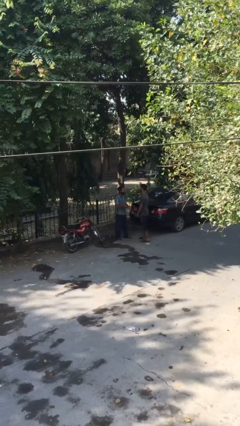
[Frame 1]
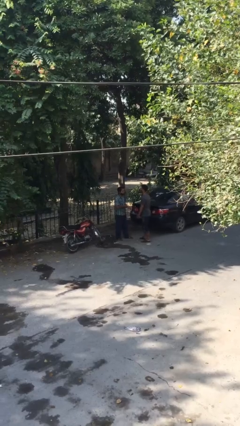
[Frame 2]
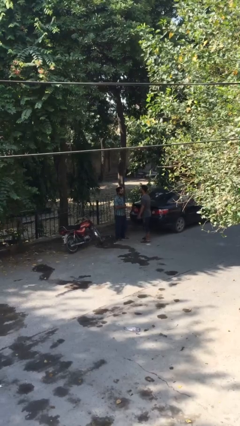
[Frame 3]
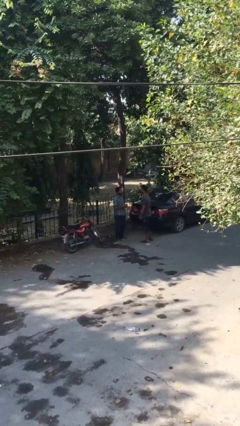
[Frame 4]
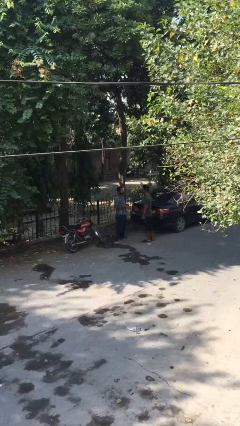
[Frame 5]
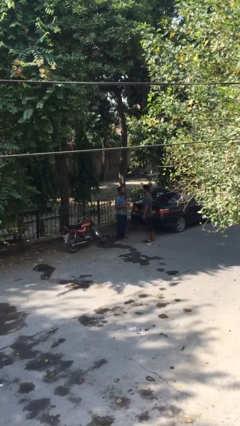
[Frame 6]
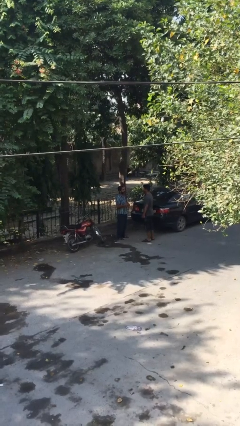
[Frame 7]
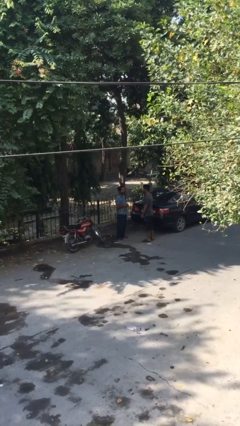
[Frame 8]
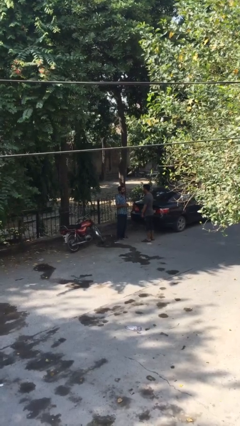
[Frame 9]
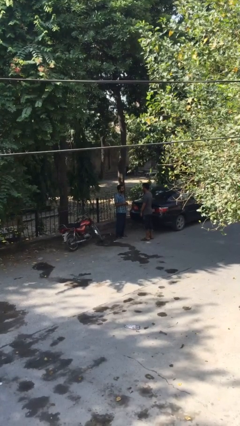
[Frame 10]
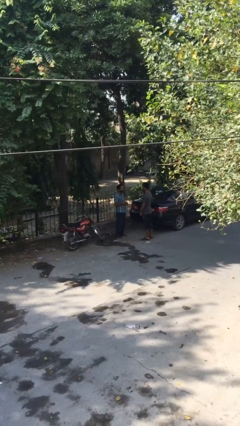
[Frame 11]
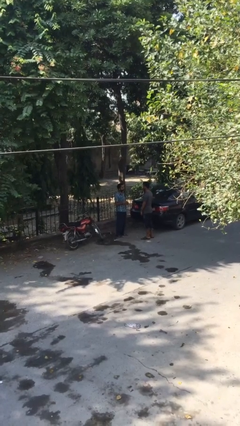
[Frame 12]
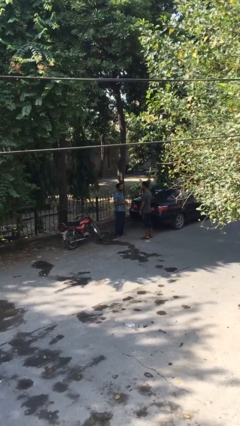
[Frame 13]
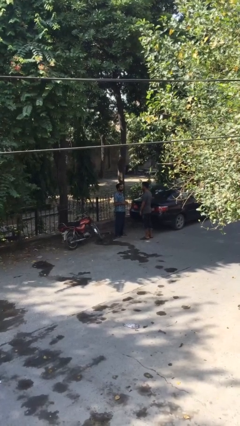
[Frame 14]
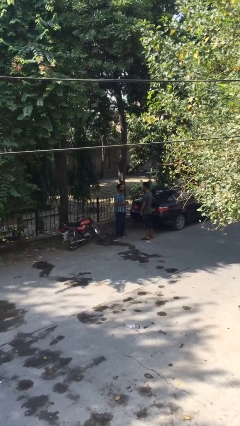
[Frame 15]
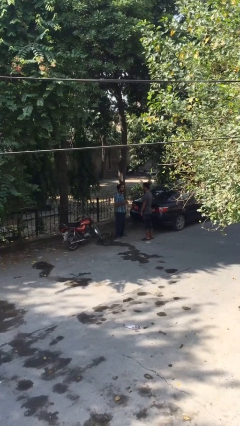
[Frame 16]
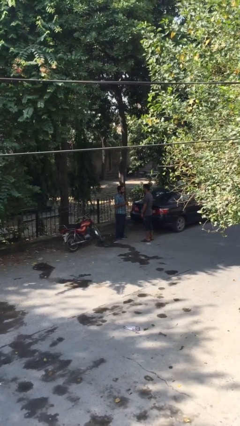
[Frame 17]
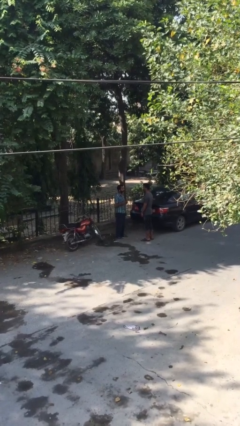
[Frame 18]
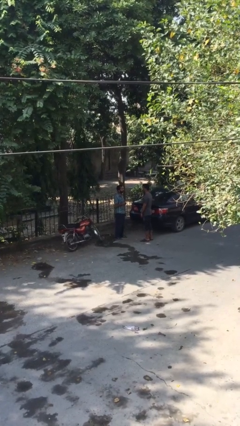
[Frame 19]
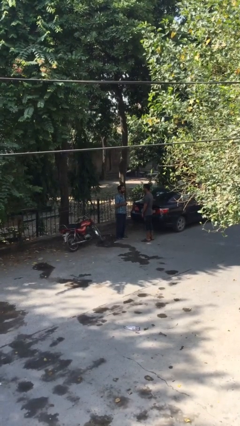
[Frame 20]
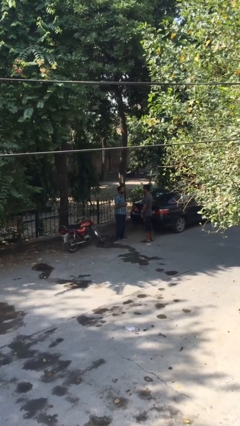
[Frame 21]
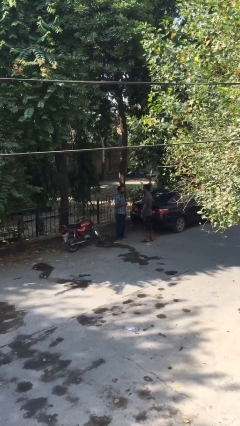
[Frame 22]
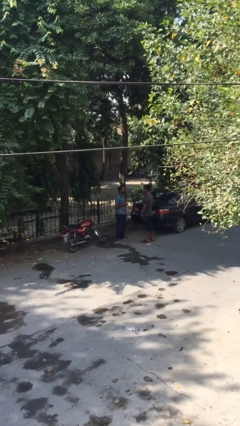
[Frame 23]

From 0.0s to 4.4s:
person talks to person

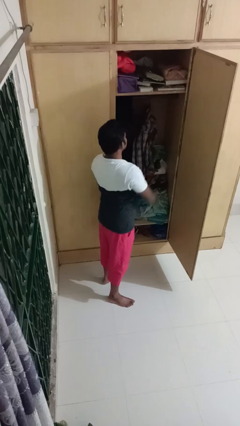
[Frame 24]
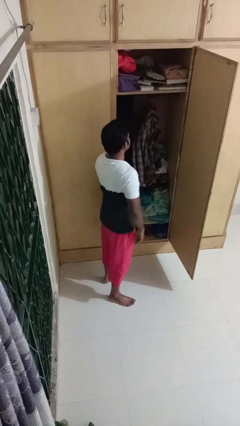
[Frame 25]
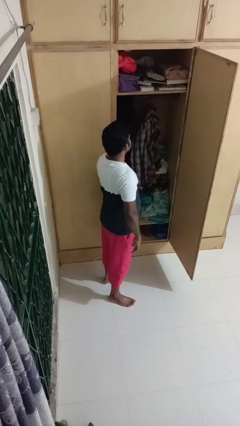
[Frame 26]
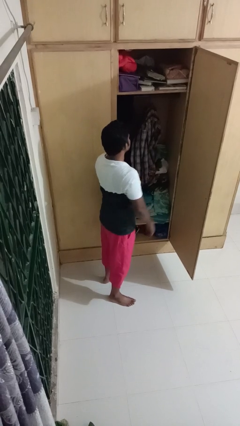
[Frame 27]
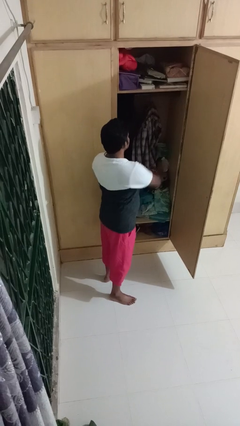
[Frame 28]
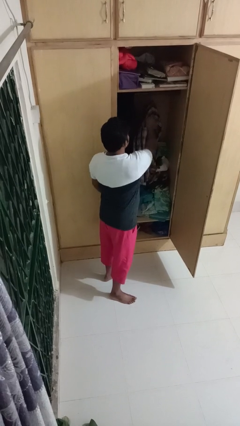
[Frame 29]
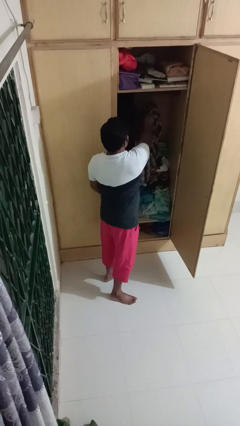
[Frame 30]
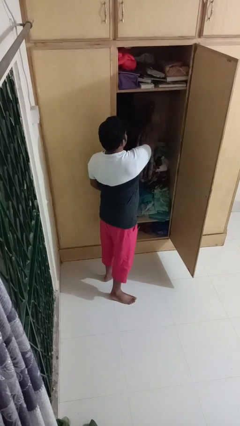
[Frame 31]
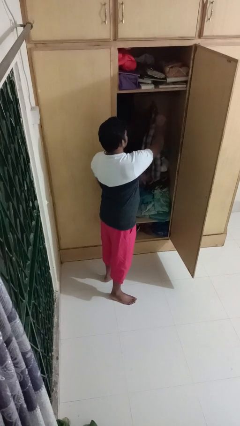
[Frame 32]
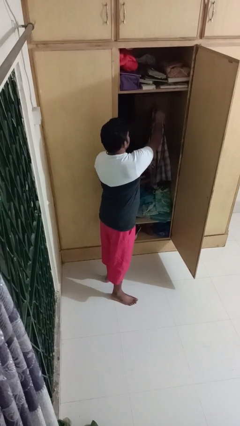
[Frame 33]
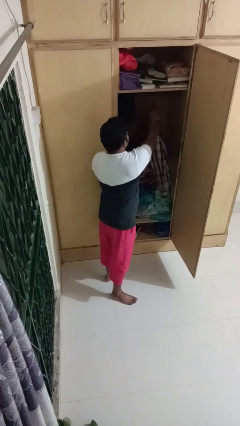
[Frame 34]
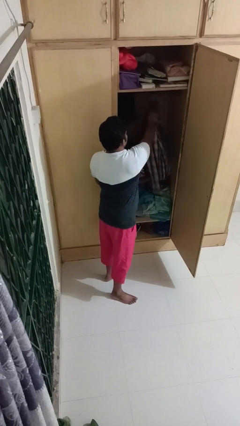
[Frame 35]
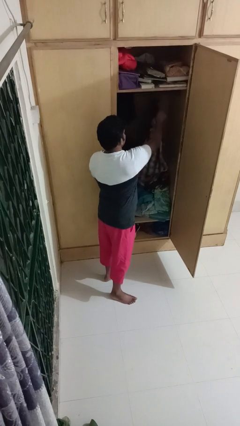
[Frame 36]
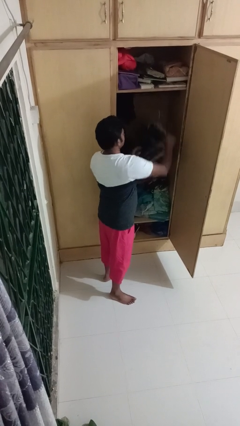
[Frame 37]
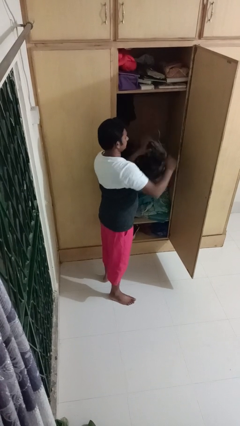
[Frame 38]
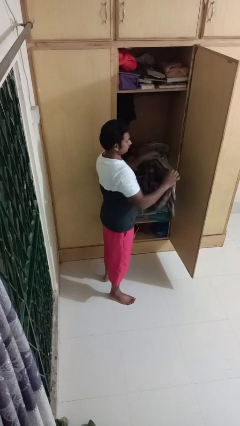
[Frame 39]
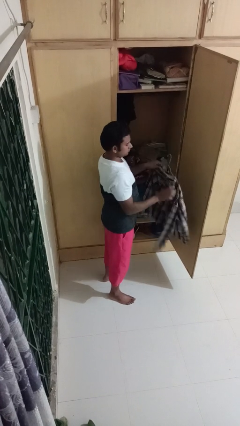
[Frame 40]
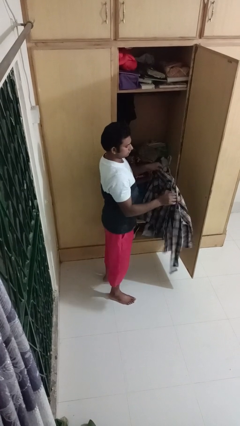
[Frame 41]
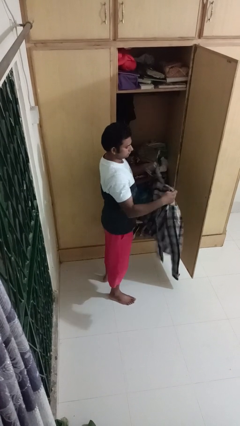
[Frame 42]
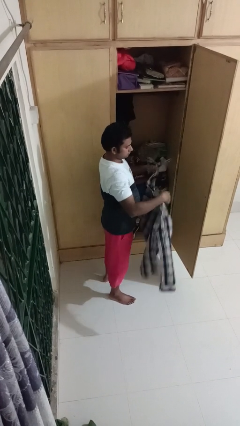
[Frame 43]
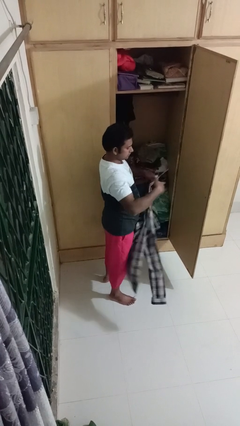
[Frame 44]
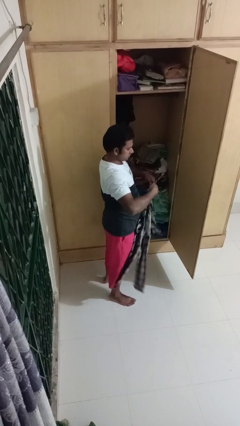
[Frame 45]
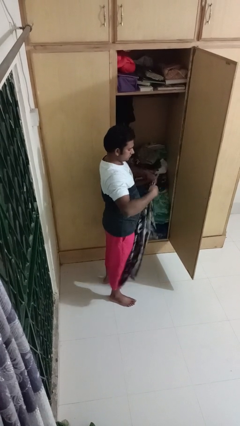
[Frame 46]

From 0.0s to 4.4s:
person takes clothes from closet

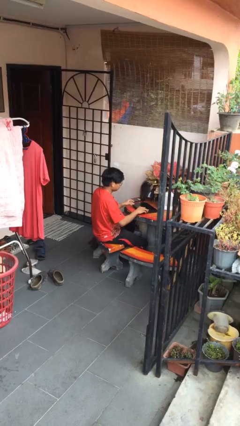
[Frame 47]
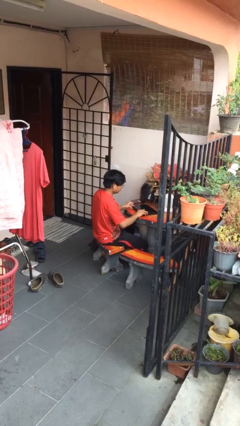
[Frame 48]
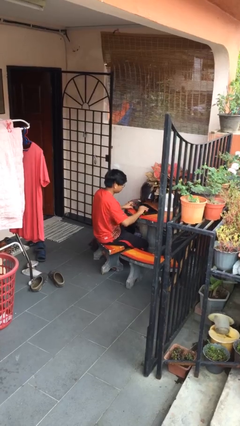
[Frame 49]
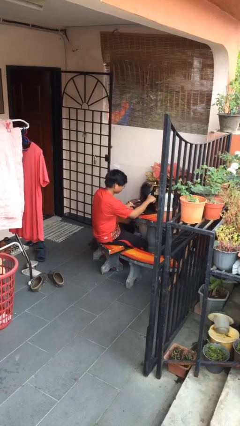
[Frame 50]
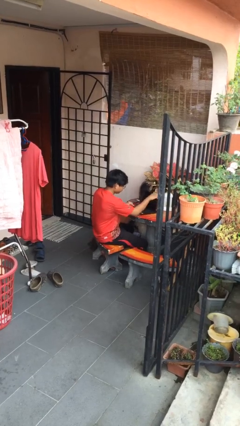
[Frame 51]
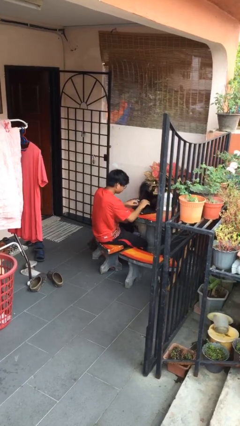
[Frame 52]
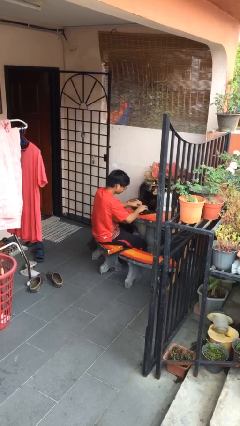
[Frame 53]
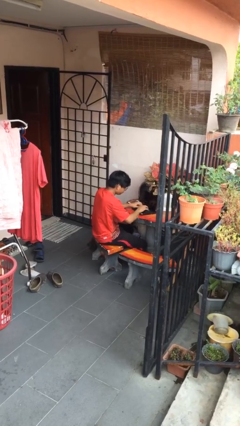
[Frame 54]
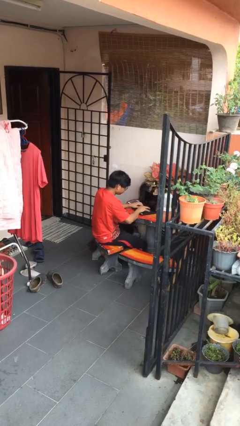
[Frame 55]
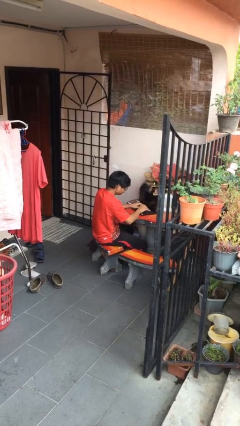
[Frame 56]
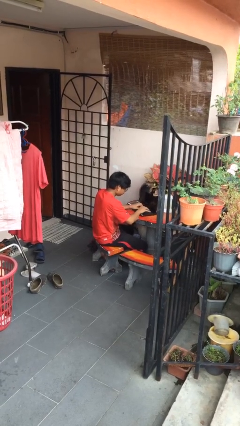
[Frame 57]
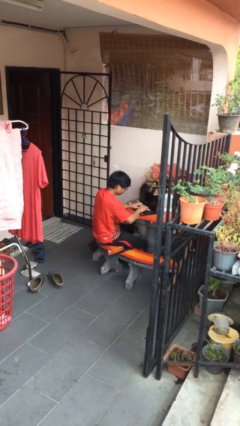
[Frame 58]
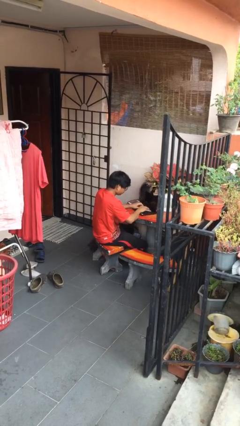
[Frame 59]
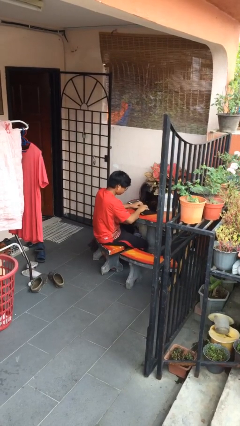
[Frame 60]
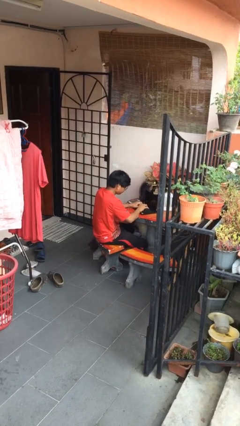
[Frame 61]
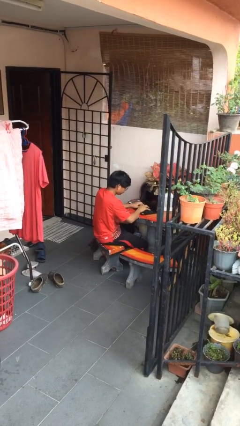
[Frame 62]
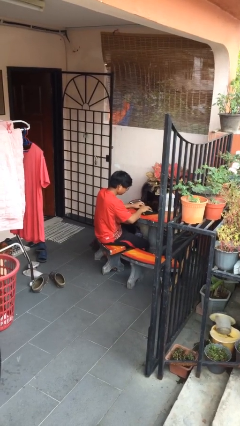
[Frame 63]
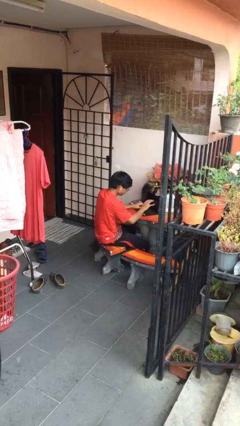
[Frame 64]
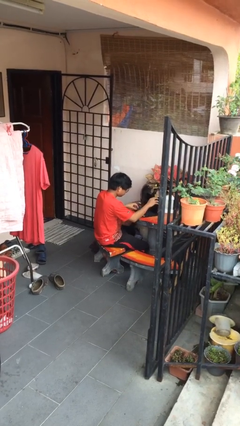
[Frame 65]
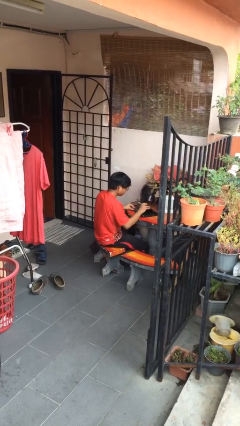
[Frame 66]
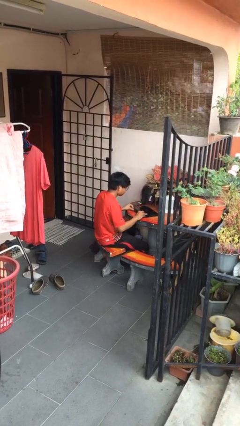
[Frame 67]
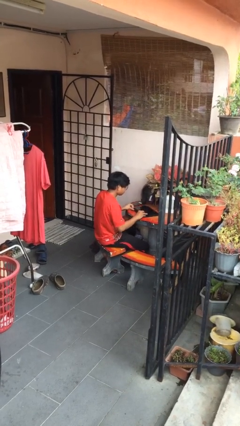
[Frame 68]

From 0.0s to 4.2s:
person interacts with laptop

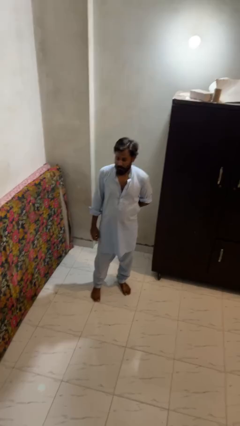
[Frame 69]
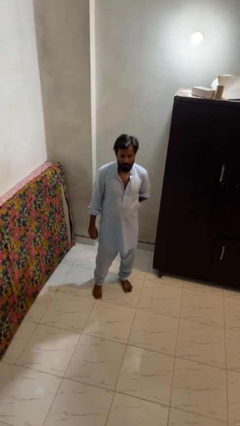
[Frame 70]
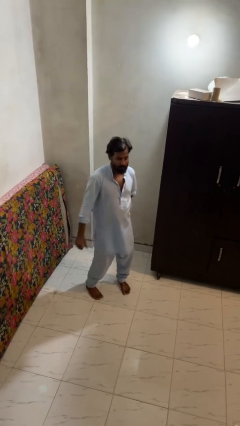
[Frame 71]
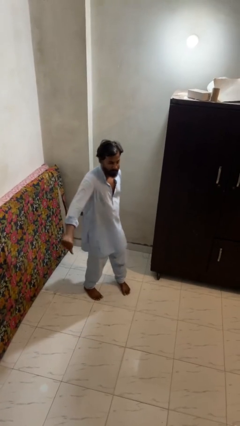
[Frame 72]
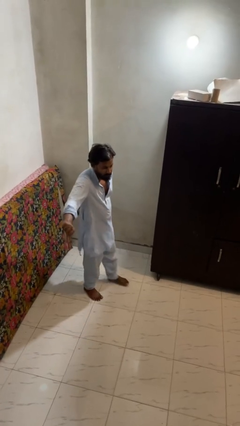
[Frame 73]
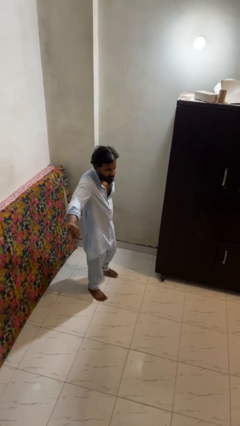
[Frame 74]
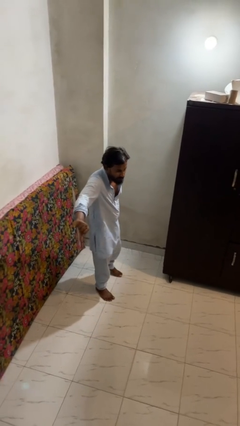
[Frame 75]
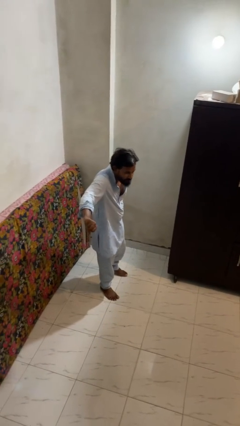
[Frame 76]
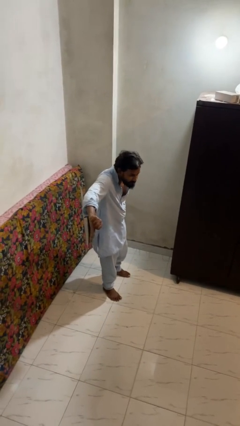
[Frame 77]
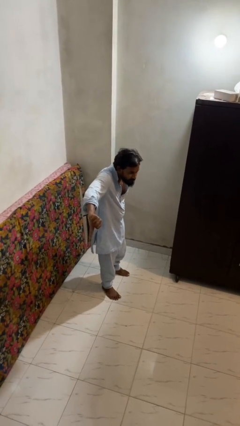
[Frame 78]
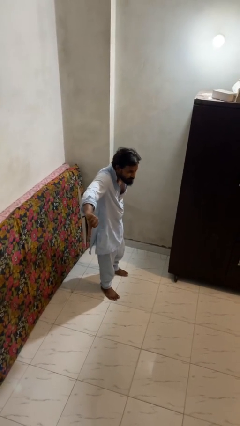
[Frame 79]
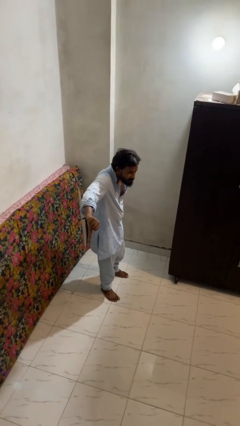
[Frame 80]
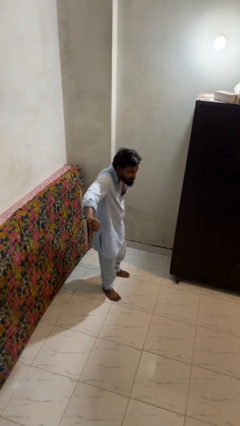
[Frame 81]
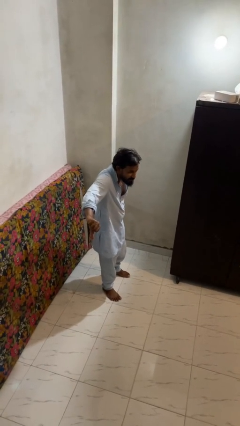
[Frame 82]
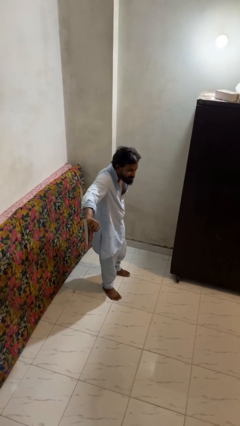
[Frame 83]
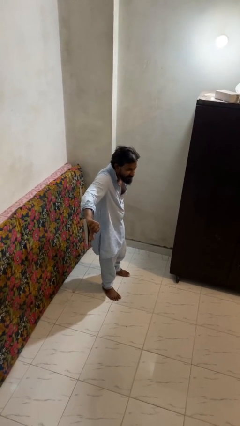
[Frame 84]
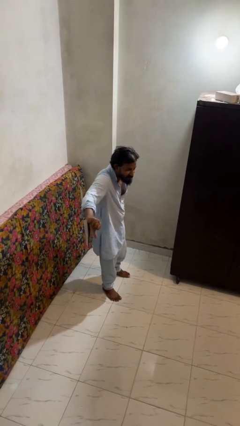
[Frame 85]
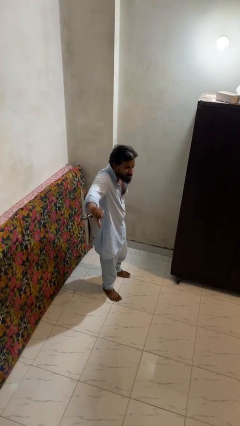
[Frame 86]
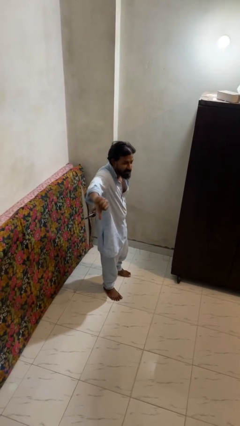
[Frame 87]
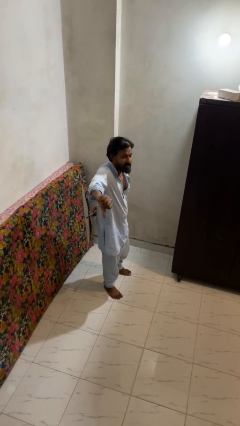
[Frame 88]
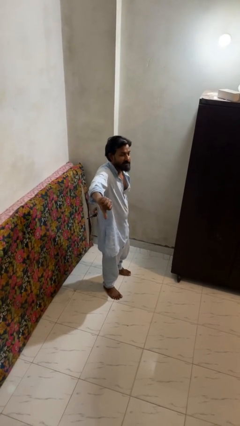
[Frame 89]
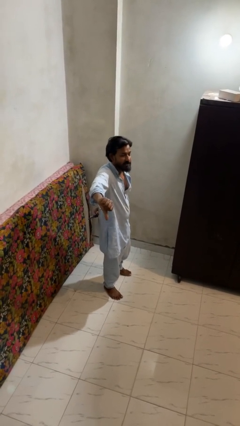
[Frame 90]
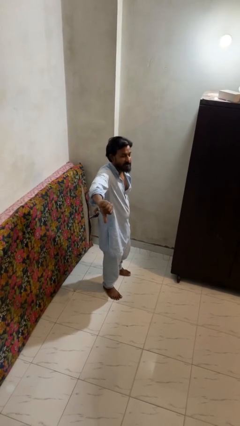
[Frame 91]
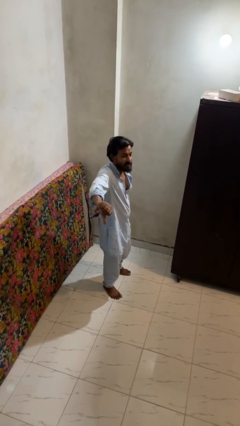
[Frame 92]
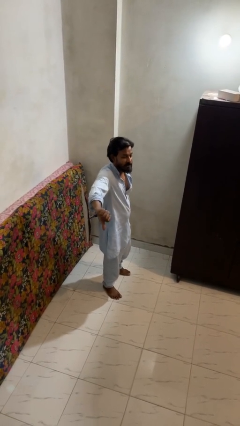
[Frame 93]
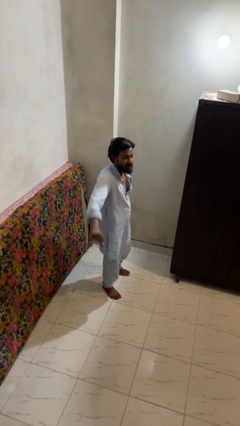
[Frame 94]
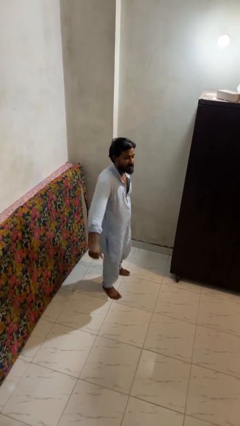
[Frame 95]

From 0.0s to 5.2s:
person gestures thumbs down
